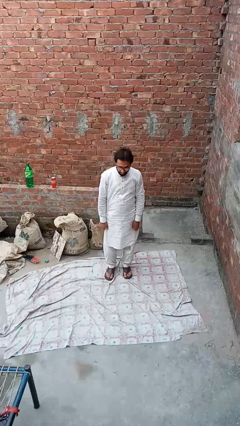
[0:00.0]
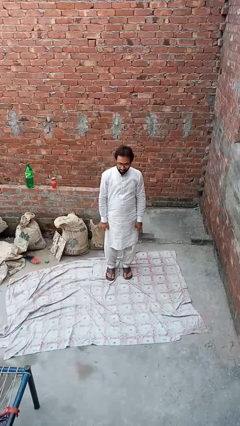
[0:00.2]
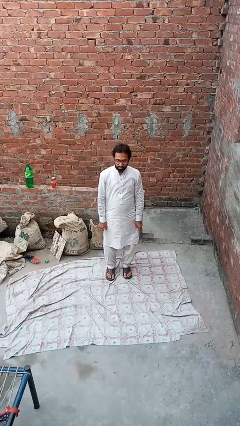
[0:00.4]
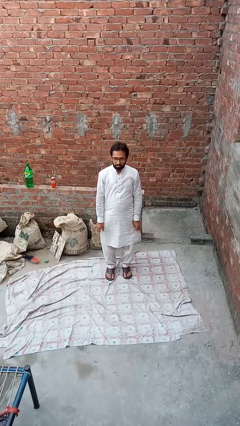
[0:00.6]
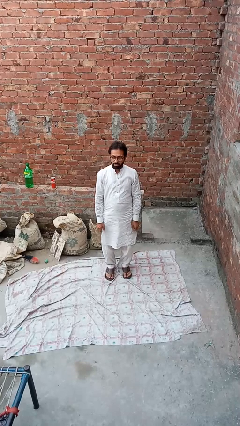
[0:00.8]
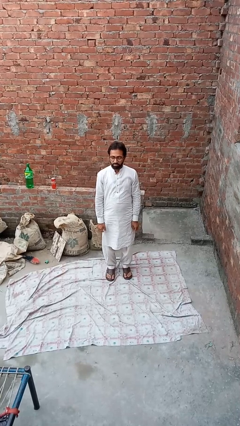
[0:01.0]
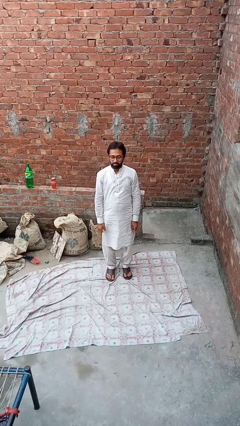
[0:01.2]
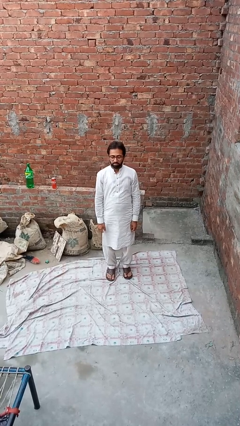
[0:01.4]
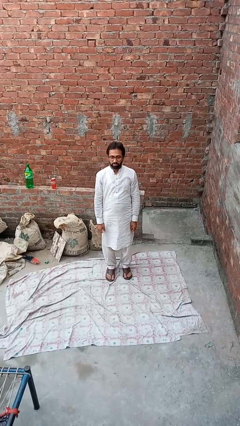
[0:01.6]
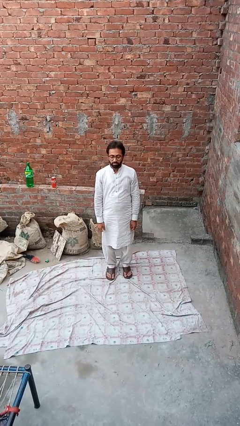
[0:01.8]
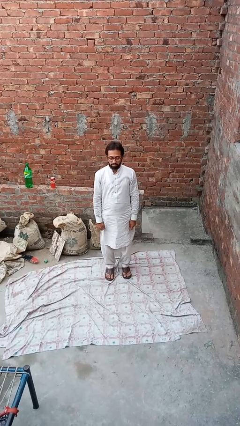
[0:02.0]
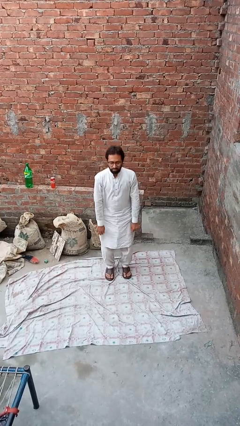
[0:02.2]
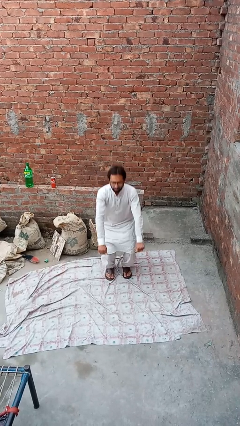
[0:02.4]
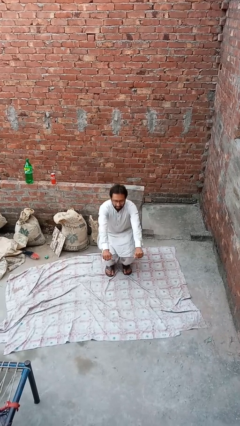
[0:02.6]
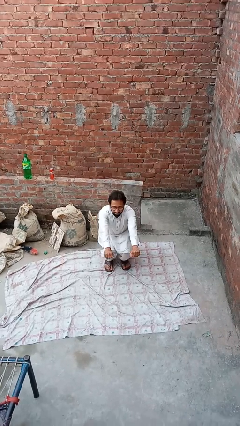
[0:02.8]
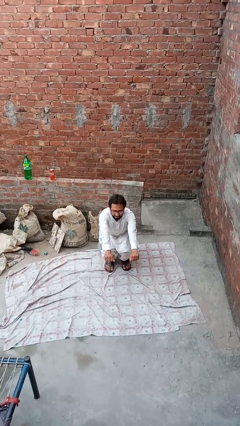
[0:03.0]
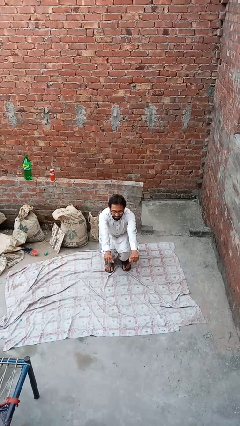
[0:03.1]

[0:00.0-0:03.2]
person squats

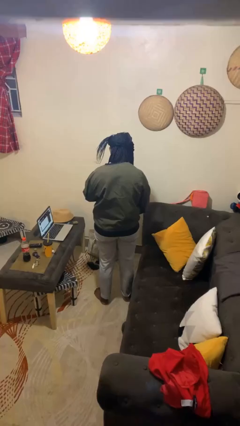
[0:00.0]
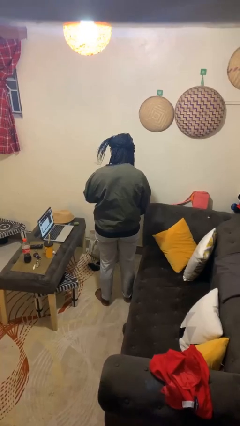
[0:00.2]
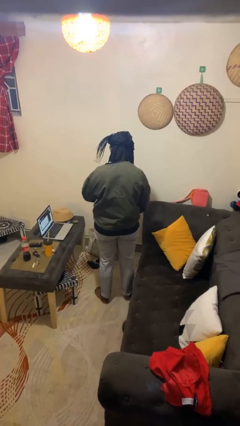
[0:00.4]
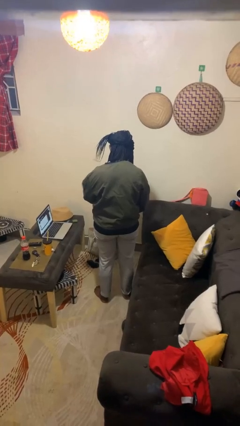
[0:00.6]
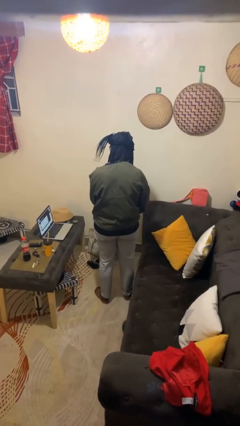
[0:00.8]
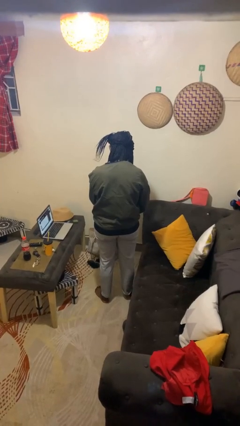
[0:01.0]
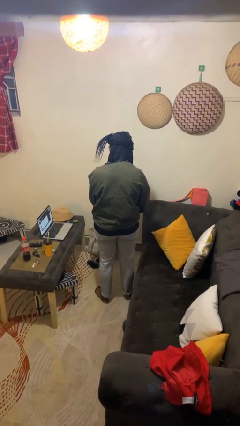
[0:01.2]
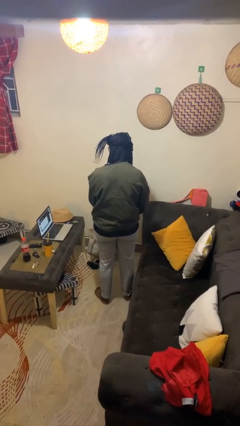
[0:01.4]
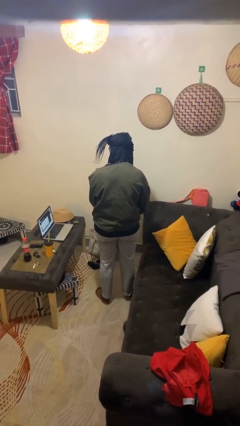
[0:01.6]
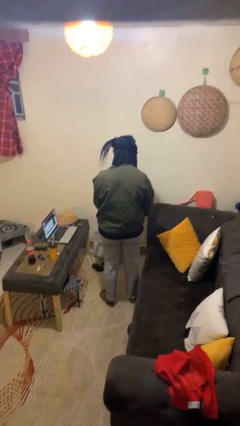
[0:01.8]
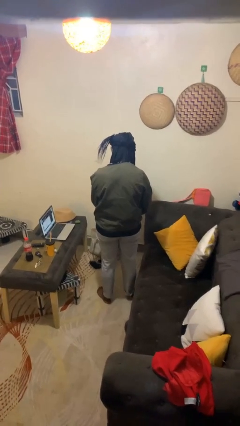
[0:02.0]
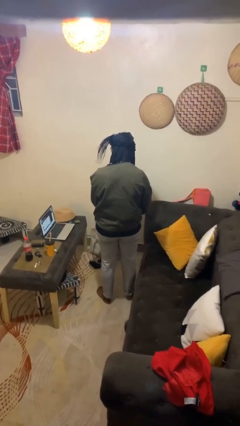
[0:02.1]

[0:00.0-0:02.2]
person unzips jacket

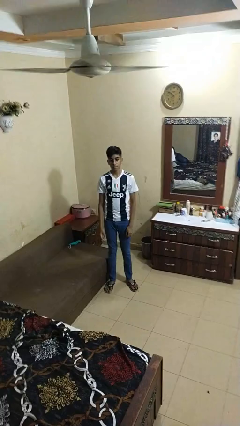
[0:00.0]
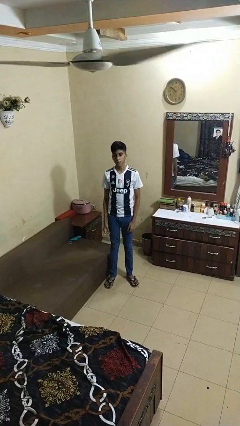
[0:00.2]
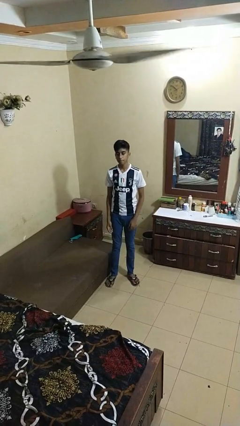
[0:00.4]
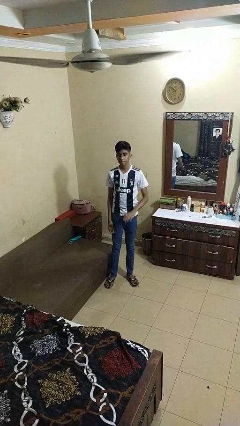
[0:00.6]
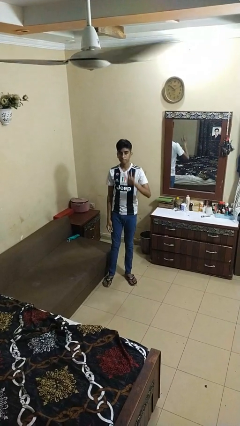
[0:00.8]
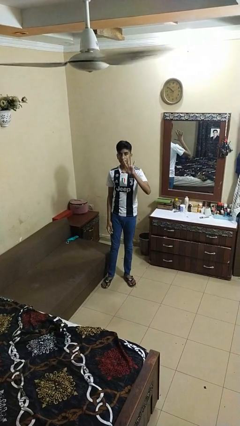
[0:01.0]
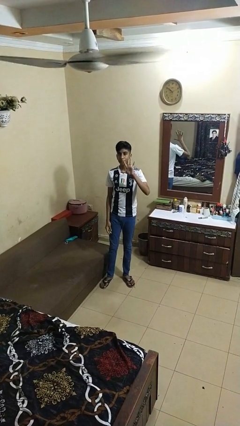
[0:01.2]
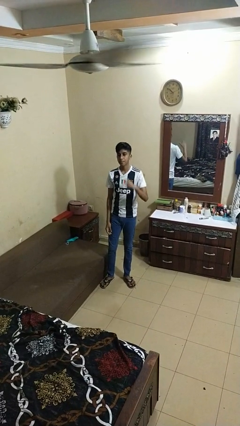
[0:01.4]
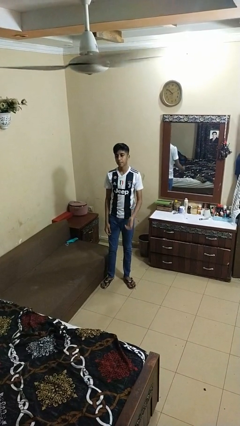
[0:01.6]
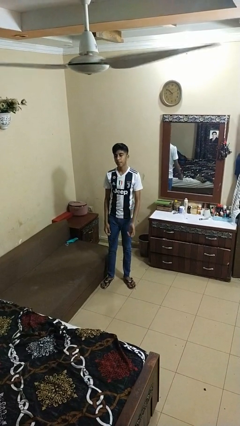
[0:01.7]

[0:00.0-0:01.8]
person gestures number five

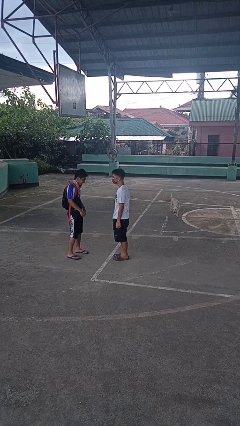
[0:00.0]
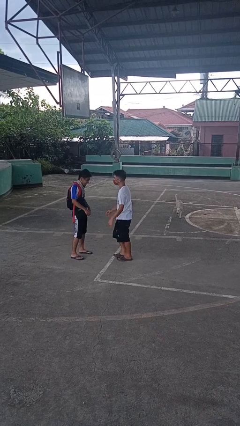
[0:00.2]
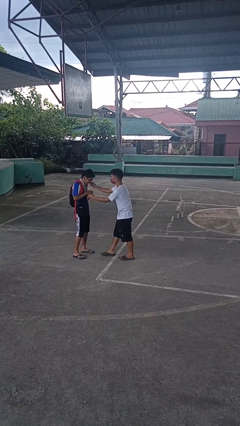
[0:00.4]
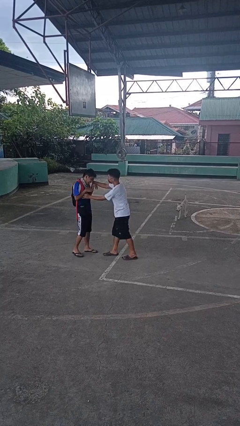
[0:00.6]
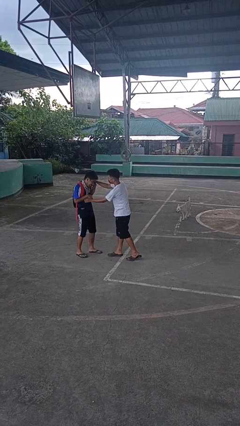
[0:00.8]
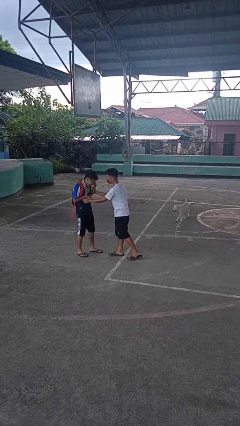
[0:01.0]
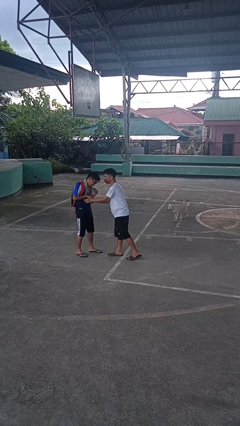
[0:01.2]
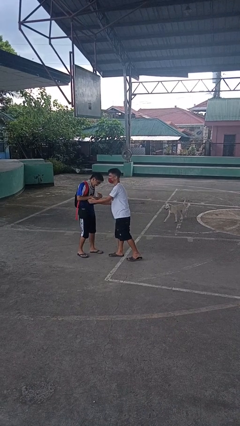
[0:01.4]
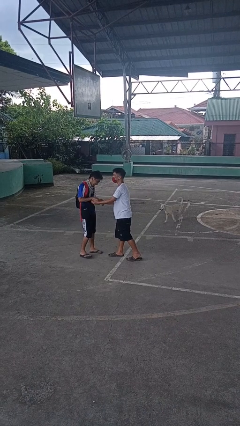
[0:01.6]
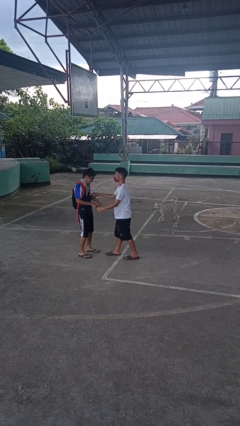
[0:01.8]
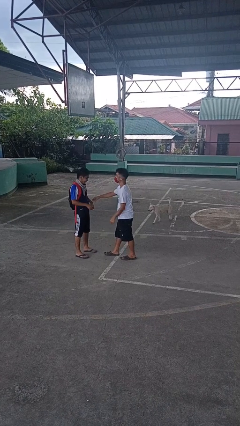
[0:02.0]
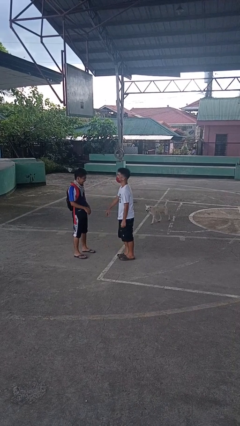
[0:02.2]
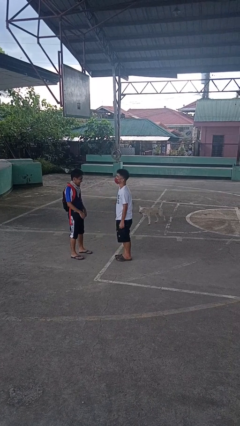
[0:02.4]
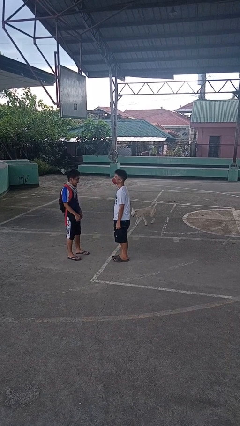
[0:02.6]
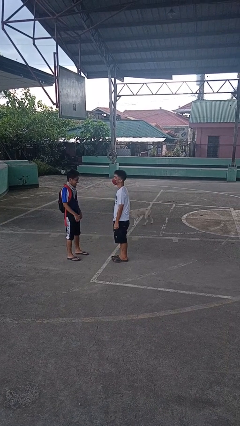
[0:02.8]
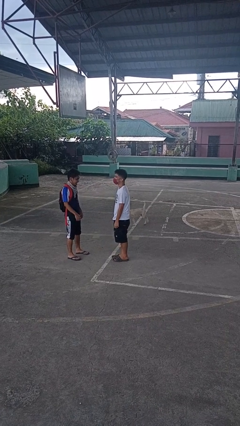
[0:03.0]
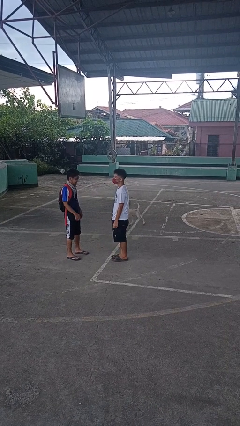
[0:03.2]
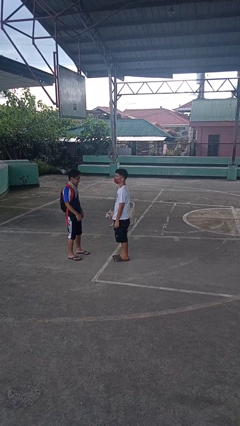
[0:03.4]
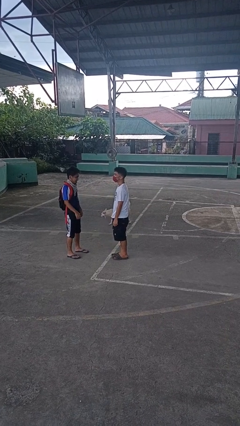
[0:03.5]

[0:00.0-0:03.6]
person tickles person

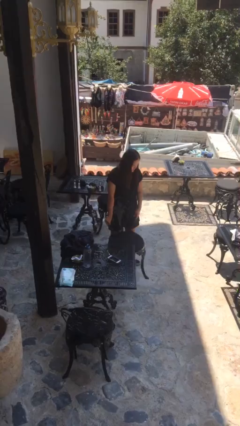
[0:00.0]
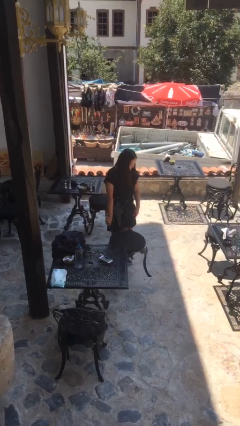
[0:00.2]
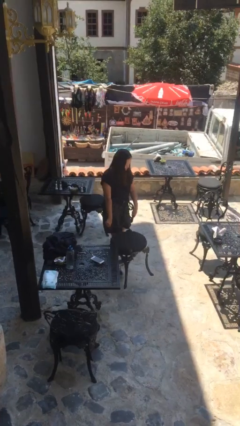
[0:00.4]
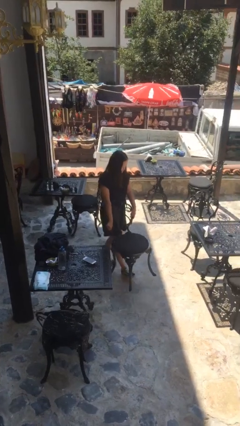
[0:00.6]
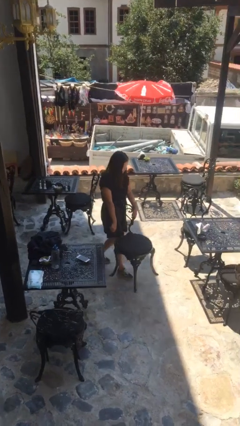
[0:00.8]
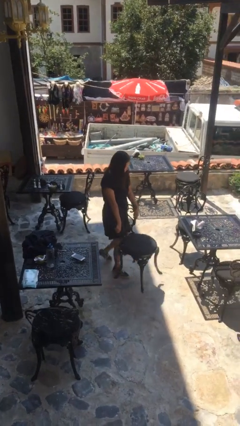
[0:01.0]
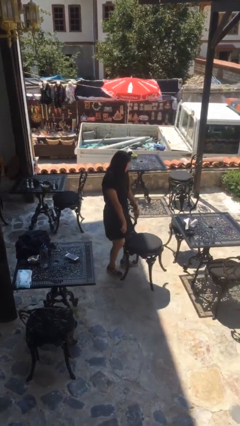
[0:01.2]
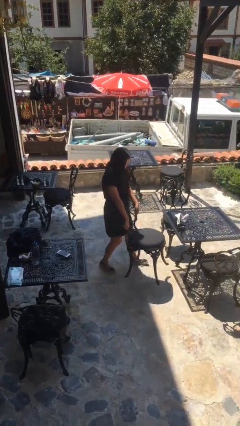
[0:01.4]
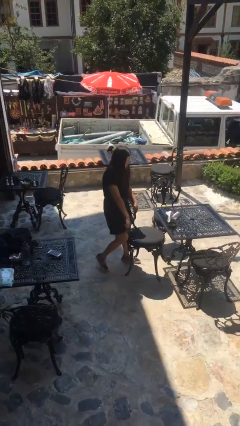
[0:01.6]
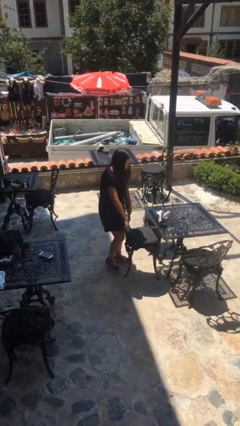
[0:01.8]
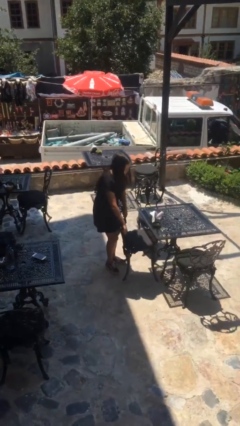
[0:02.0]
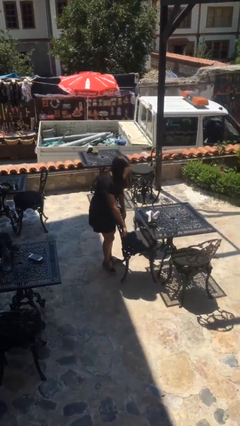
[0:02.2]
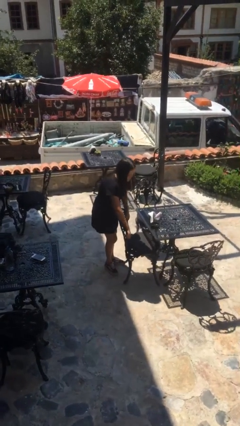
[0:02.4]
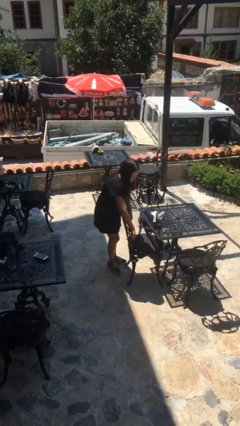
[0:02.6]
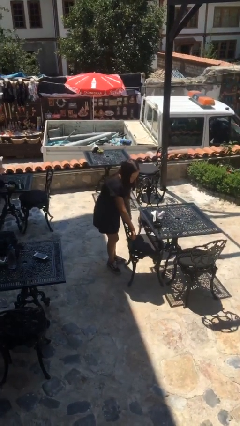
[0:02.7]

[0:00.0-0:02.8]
person carries heavy object

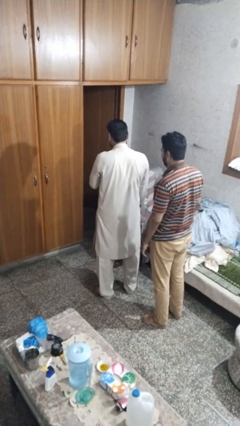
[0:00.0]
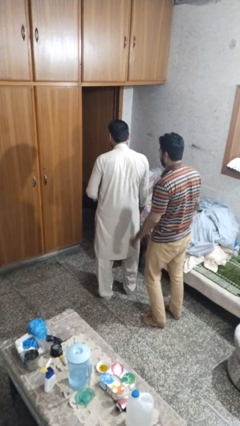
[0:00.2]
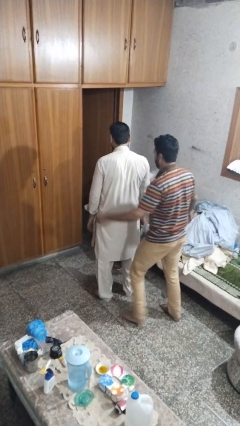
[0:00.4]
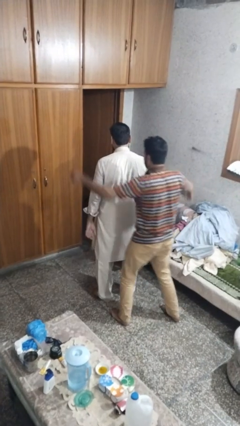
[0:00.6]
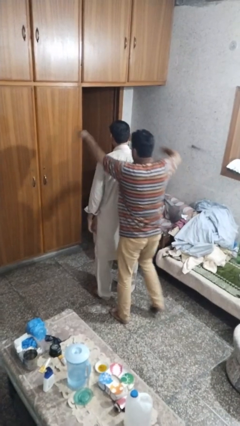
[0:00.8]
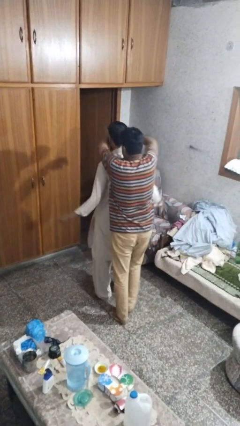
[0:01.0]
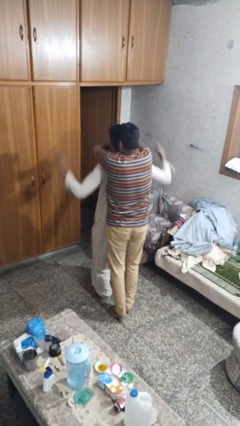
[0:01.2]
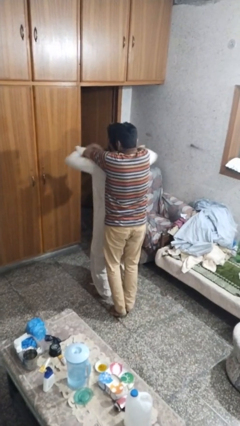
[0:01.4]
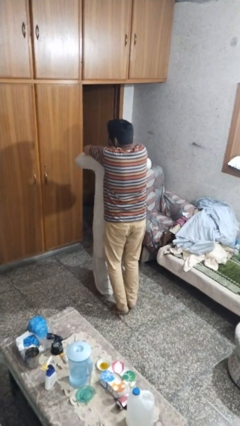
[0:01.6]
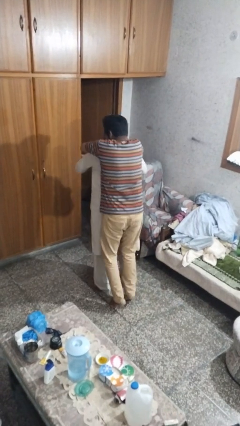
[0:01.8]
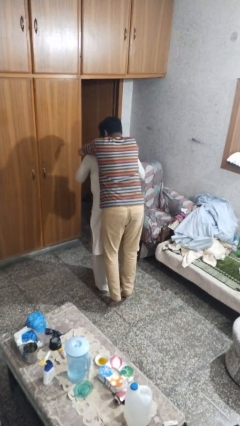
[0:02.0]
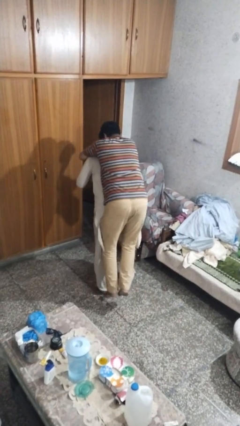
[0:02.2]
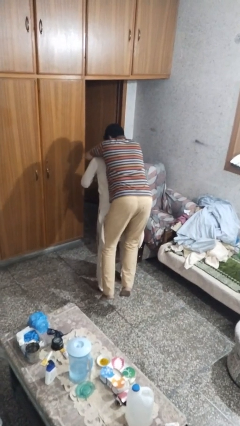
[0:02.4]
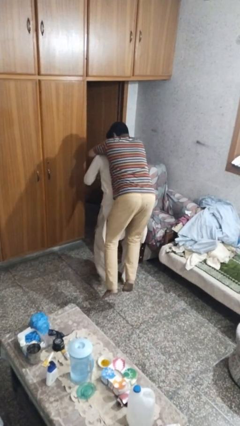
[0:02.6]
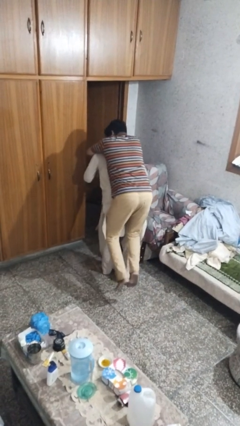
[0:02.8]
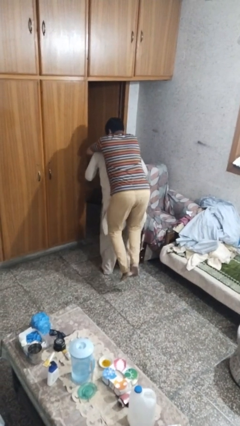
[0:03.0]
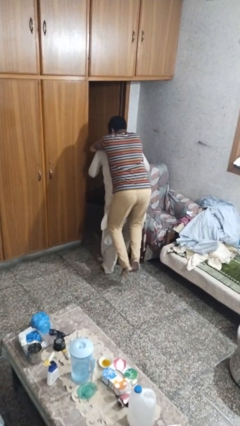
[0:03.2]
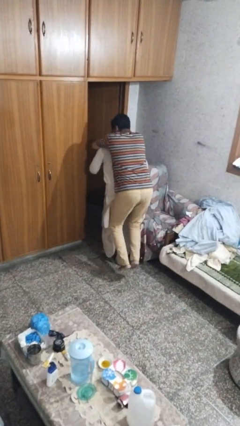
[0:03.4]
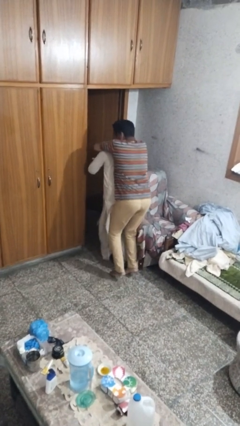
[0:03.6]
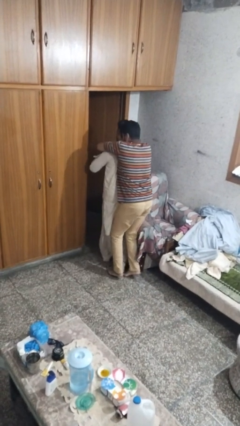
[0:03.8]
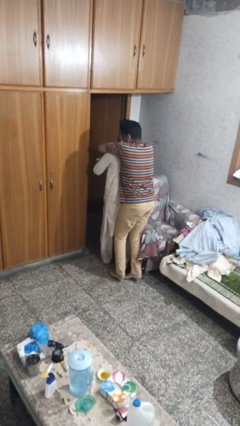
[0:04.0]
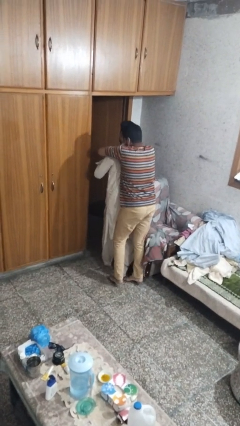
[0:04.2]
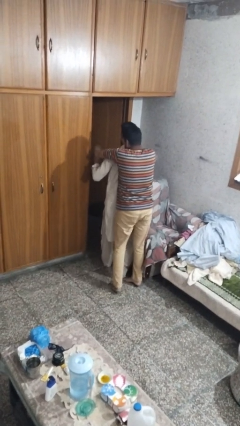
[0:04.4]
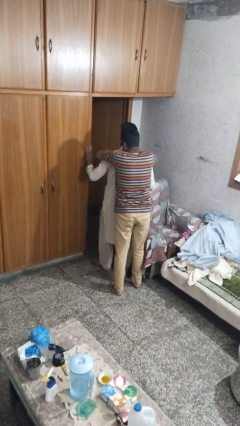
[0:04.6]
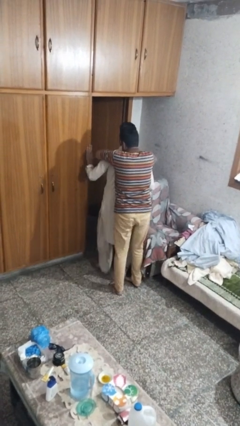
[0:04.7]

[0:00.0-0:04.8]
person carries person on back
